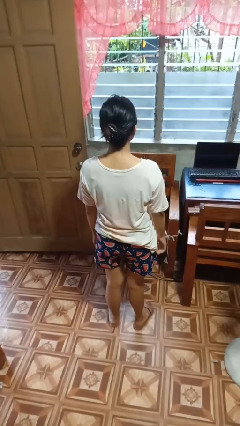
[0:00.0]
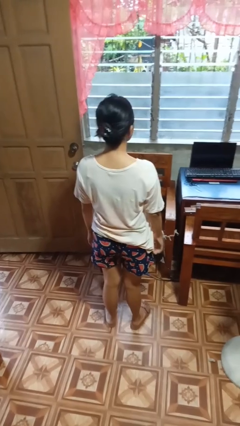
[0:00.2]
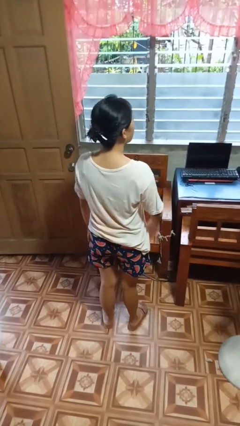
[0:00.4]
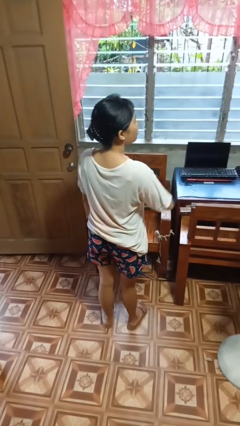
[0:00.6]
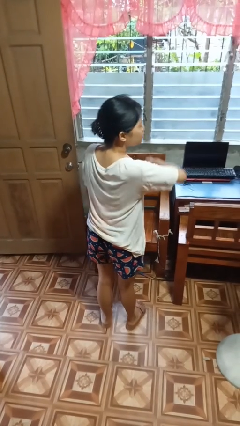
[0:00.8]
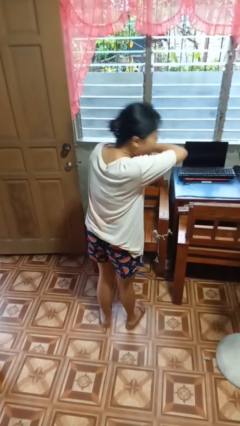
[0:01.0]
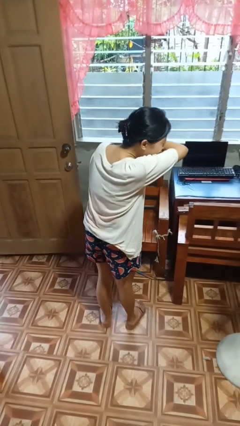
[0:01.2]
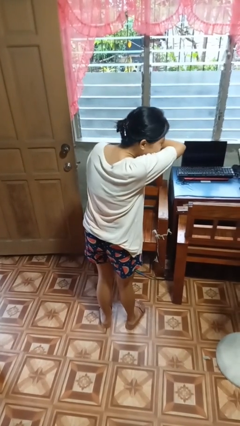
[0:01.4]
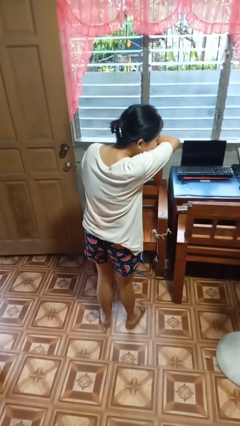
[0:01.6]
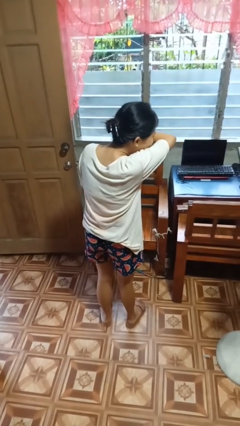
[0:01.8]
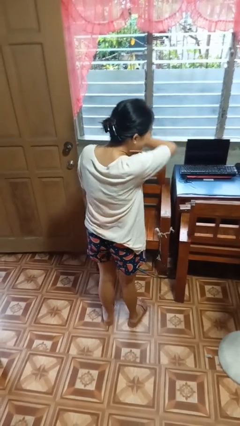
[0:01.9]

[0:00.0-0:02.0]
person sneezes into arm

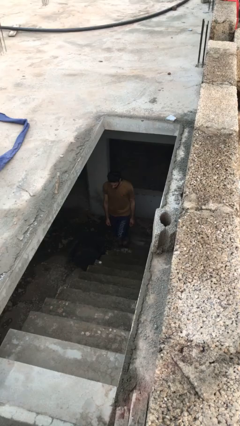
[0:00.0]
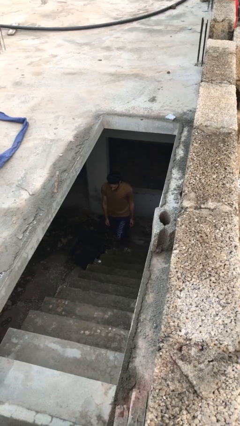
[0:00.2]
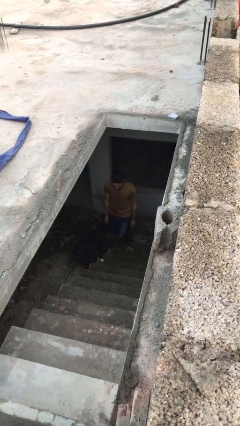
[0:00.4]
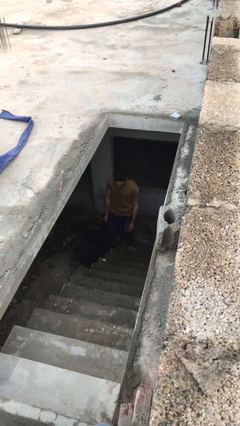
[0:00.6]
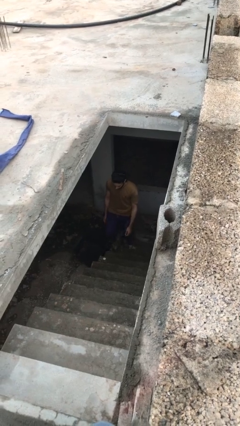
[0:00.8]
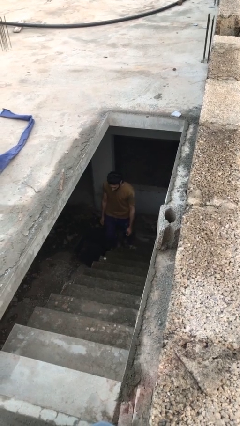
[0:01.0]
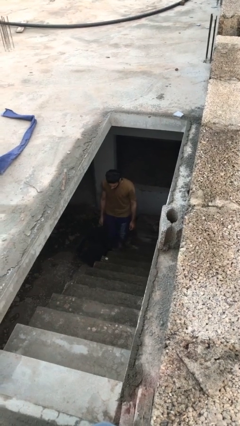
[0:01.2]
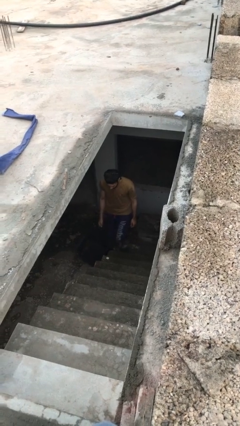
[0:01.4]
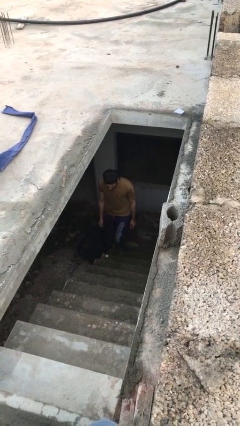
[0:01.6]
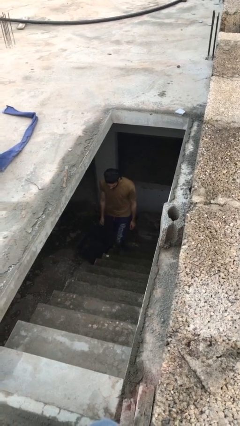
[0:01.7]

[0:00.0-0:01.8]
person climbs up stairs

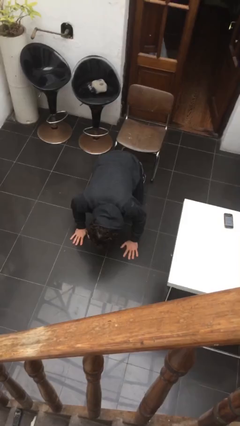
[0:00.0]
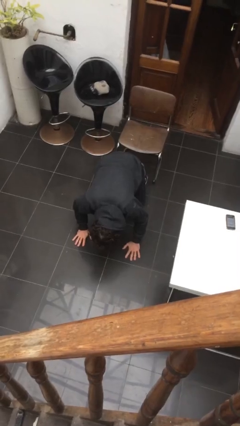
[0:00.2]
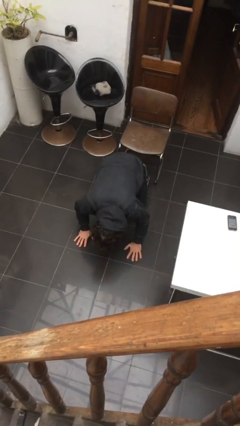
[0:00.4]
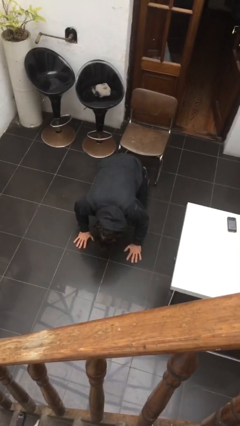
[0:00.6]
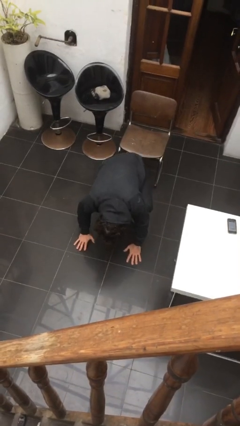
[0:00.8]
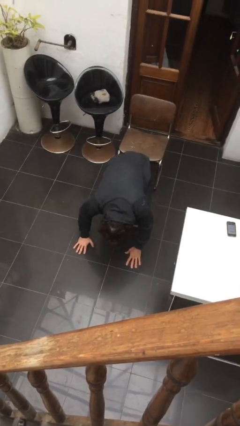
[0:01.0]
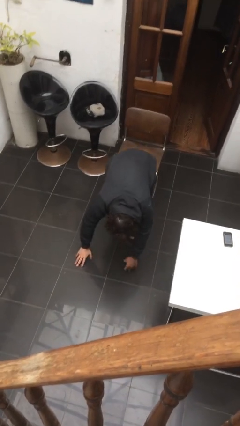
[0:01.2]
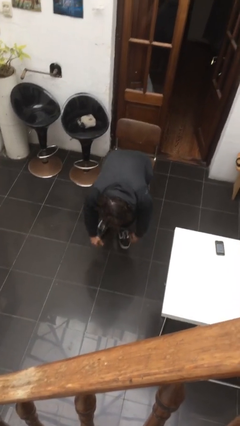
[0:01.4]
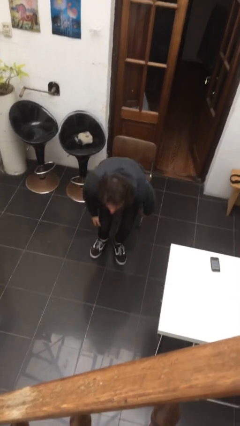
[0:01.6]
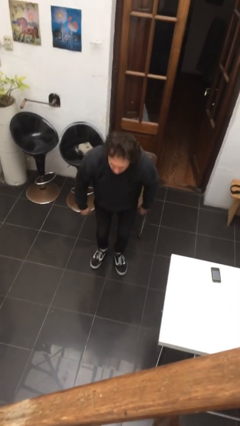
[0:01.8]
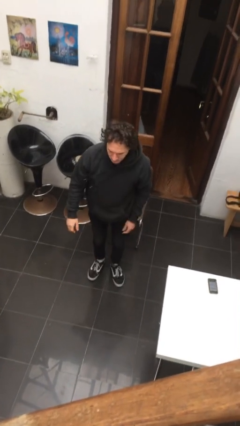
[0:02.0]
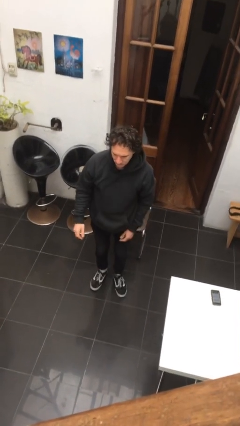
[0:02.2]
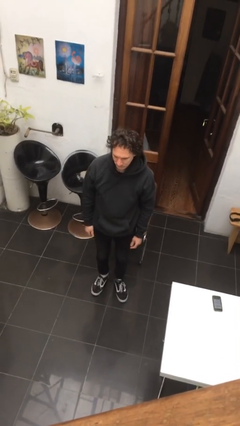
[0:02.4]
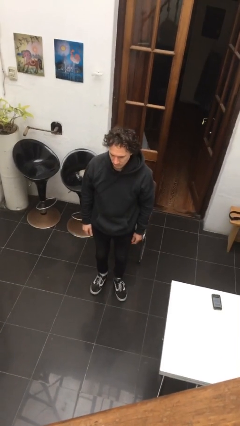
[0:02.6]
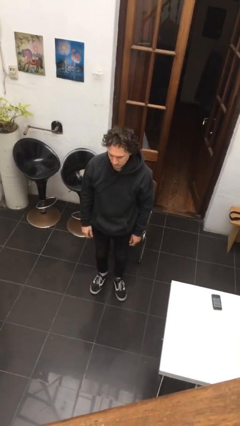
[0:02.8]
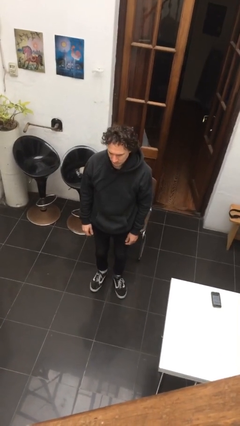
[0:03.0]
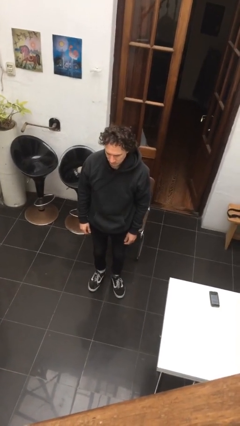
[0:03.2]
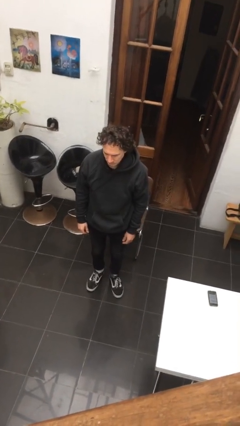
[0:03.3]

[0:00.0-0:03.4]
person stands up from floor

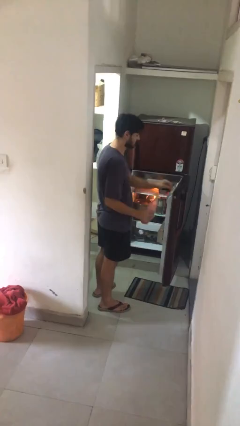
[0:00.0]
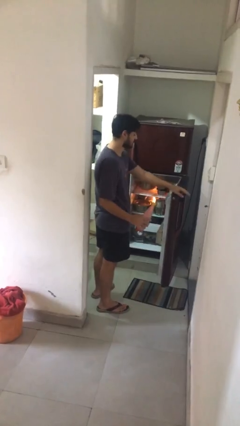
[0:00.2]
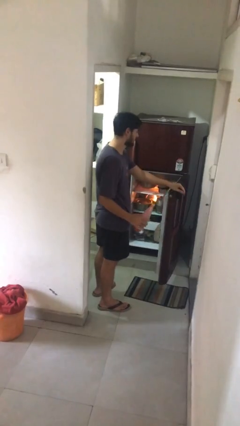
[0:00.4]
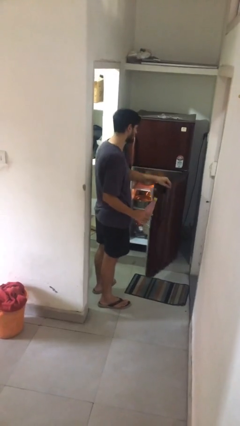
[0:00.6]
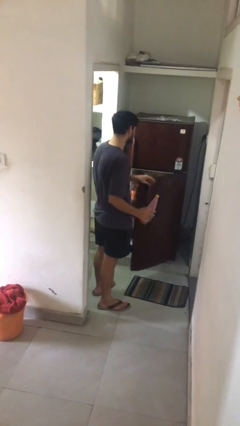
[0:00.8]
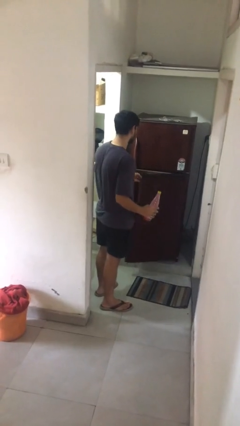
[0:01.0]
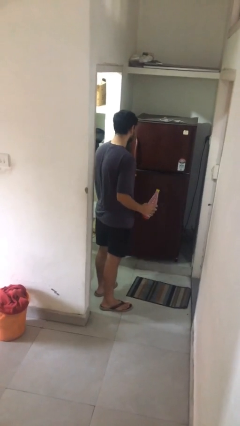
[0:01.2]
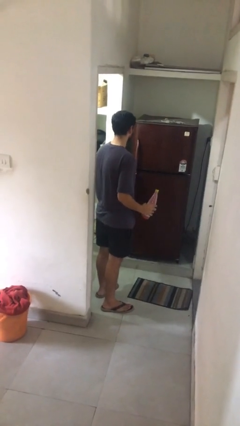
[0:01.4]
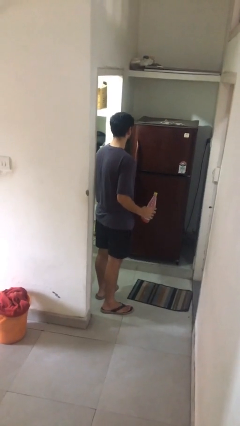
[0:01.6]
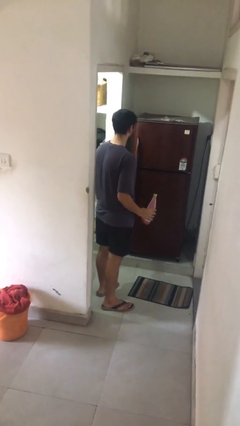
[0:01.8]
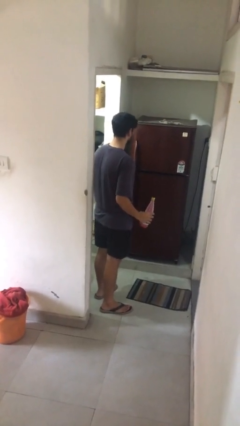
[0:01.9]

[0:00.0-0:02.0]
person closes refrigerator

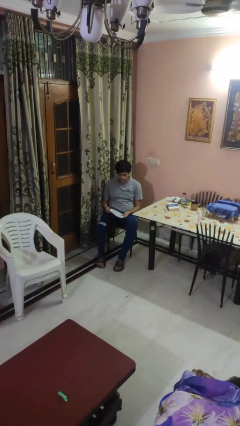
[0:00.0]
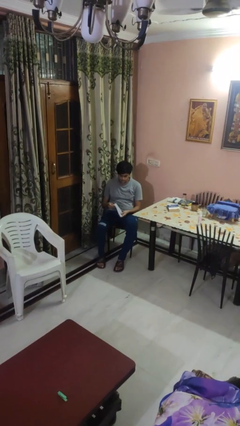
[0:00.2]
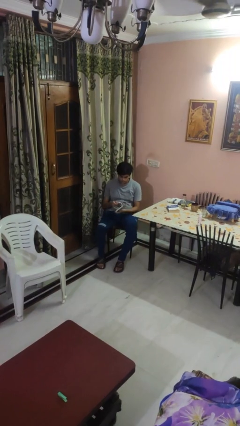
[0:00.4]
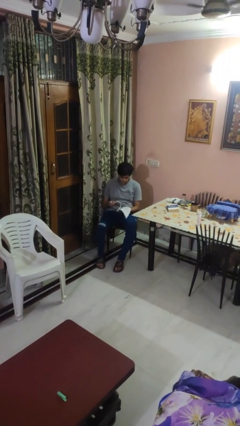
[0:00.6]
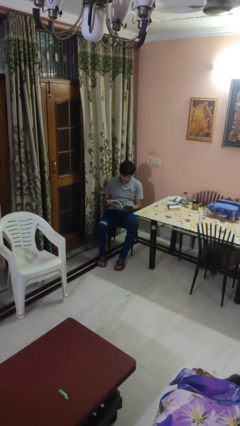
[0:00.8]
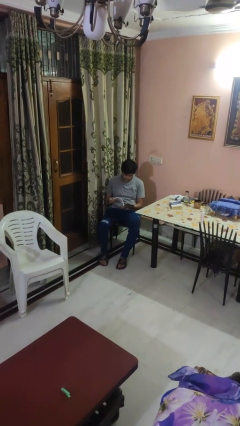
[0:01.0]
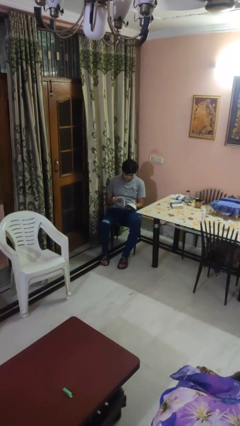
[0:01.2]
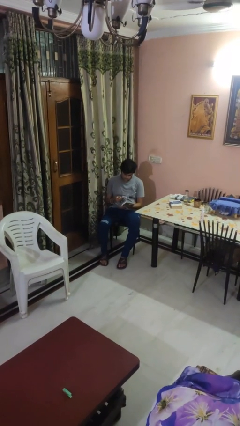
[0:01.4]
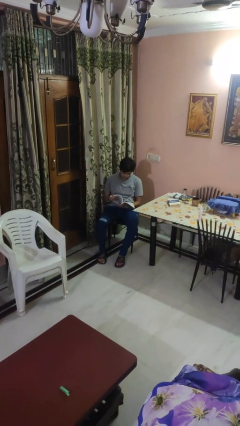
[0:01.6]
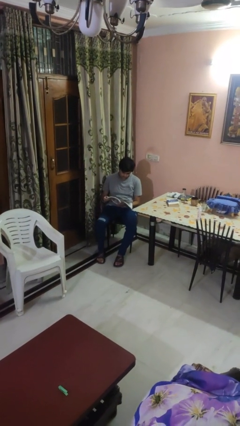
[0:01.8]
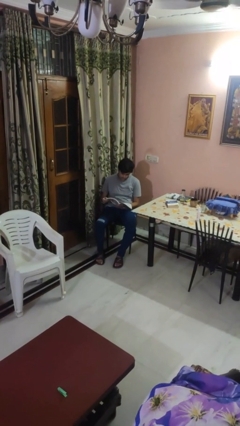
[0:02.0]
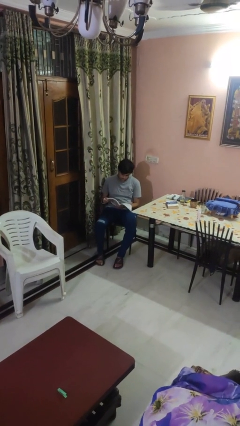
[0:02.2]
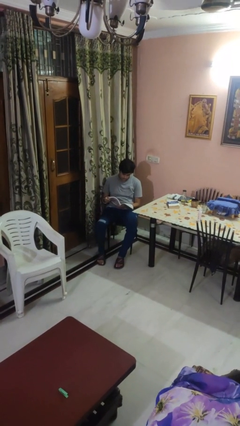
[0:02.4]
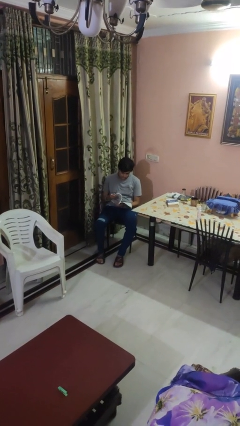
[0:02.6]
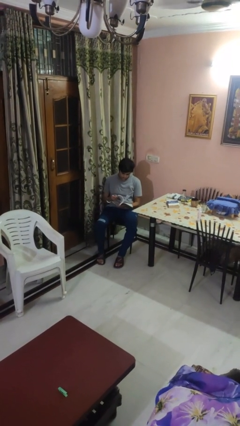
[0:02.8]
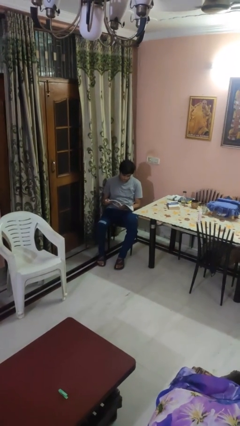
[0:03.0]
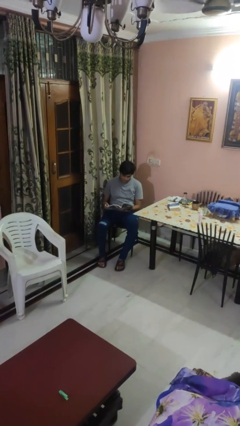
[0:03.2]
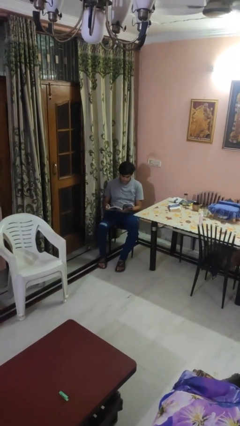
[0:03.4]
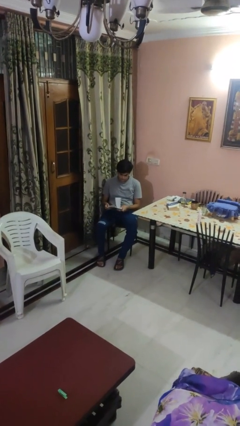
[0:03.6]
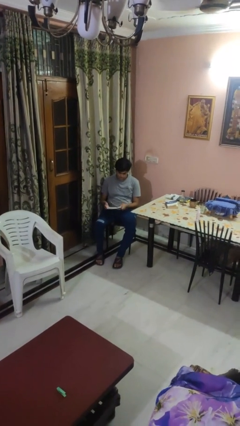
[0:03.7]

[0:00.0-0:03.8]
person reads magazine

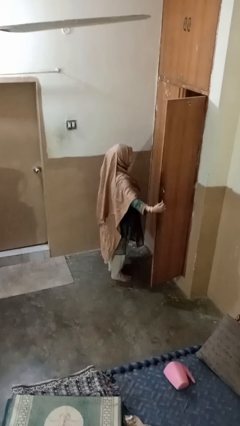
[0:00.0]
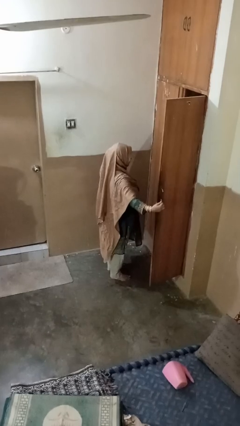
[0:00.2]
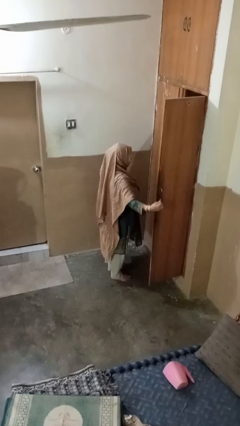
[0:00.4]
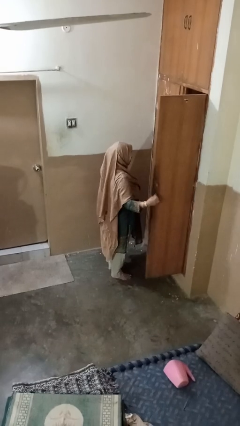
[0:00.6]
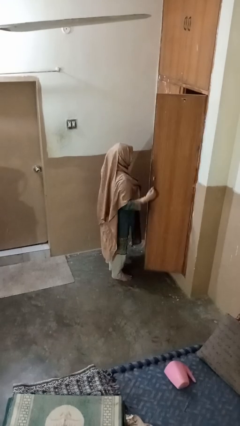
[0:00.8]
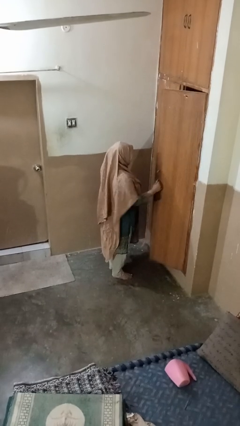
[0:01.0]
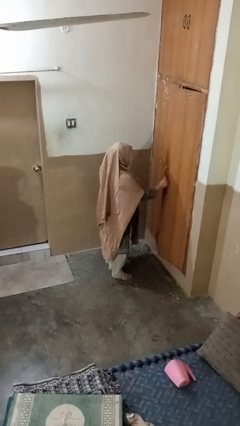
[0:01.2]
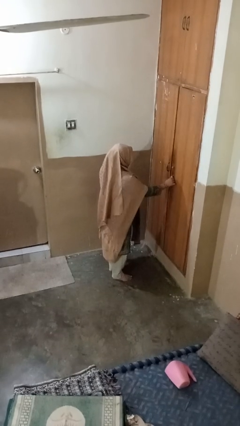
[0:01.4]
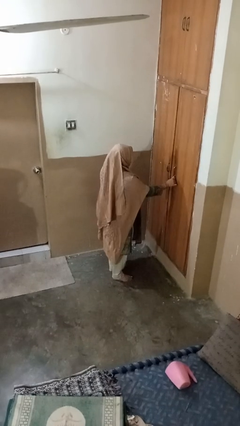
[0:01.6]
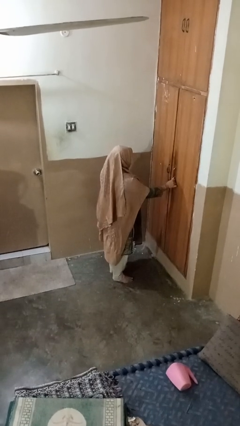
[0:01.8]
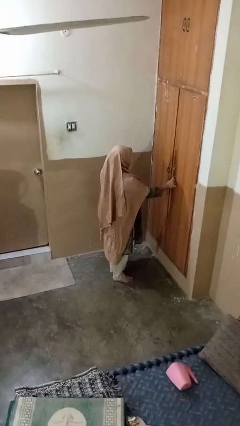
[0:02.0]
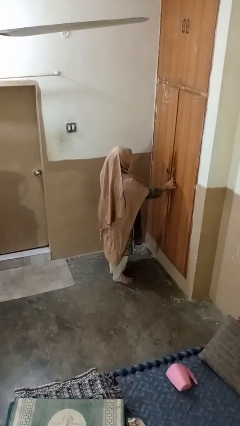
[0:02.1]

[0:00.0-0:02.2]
person closes closet door

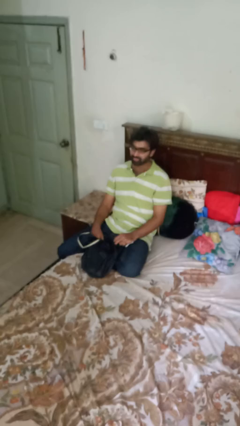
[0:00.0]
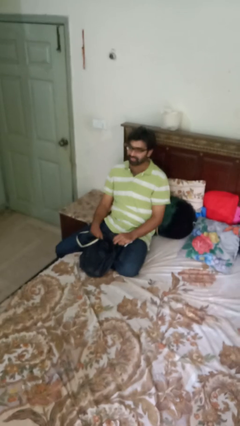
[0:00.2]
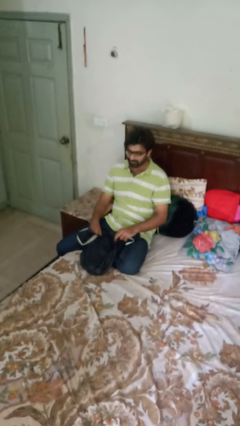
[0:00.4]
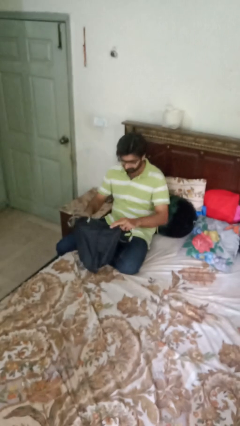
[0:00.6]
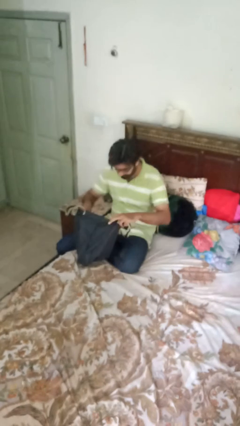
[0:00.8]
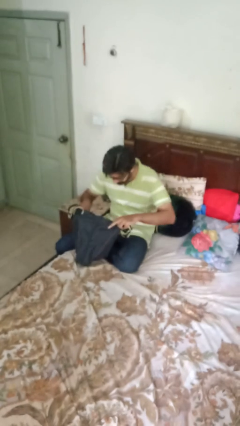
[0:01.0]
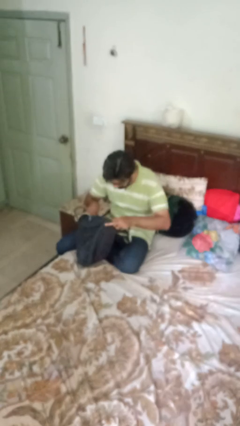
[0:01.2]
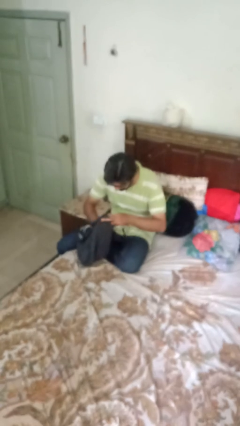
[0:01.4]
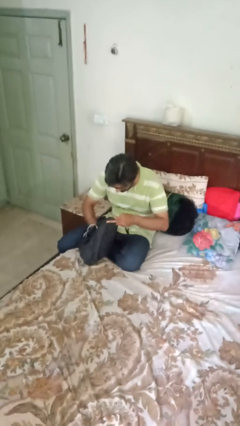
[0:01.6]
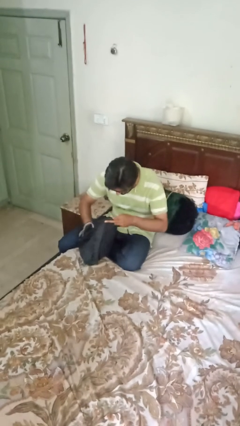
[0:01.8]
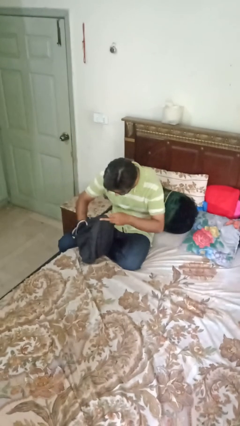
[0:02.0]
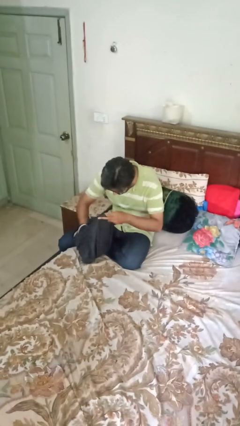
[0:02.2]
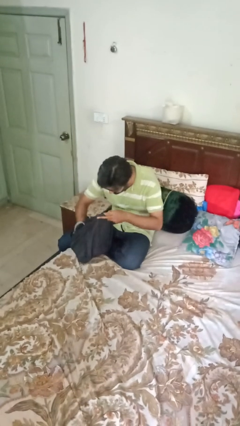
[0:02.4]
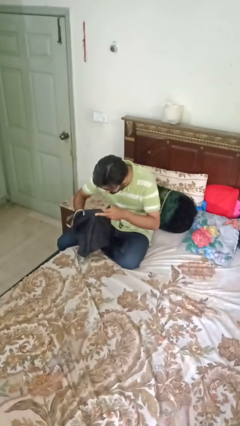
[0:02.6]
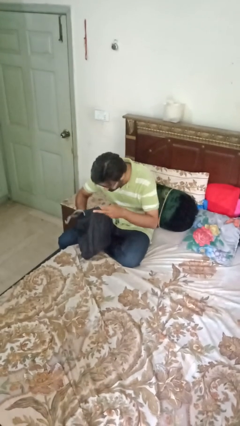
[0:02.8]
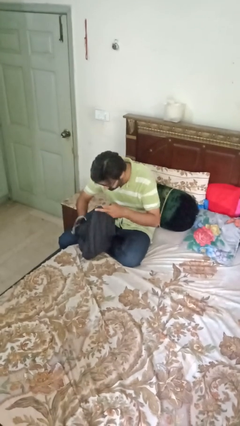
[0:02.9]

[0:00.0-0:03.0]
person searches in bag
